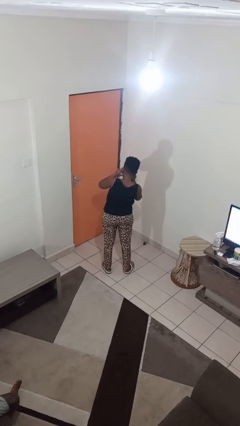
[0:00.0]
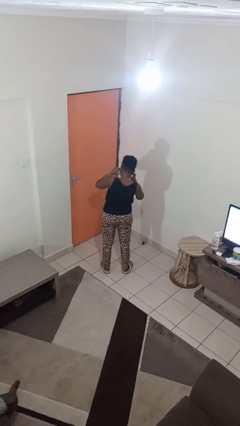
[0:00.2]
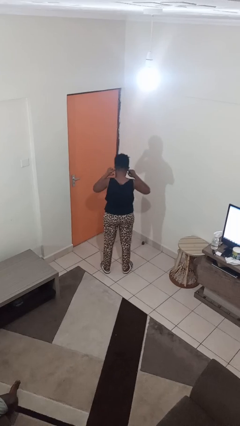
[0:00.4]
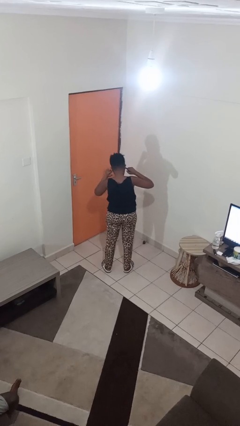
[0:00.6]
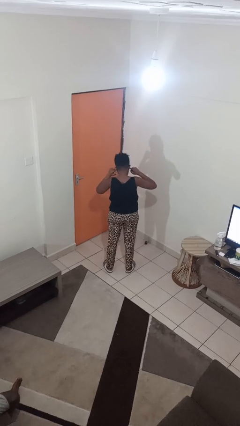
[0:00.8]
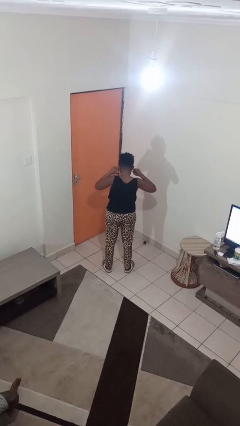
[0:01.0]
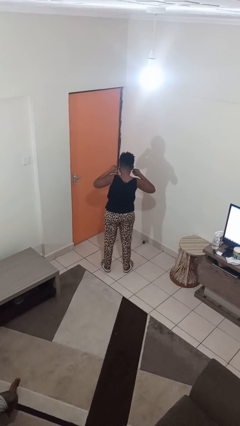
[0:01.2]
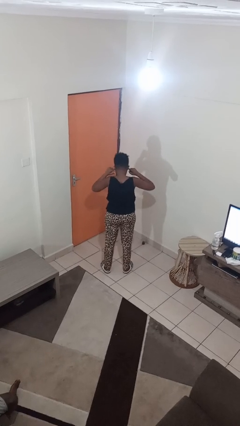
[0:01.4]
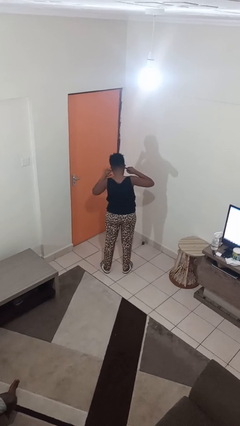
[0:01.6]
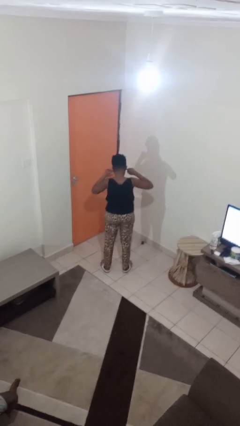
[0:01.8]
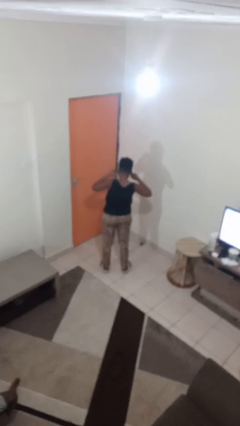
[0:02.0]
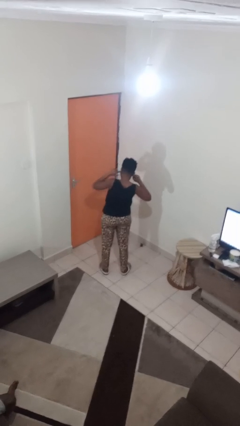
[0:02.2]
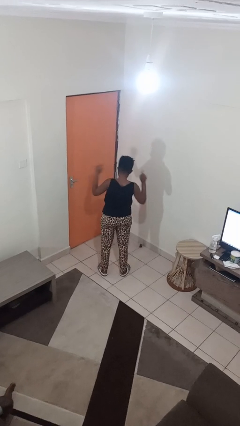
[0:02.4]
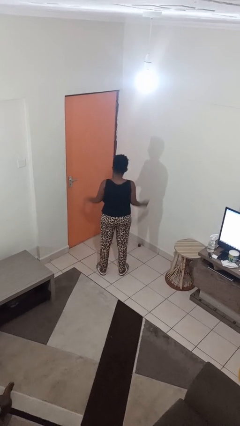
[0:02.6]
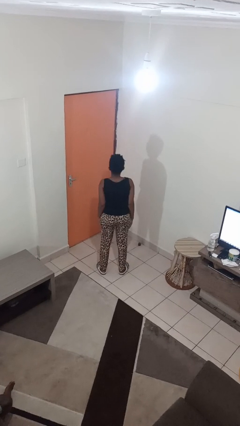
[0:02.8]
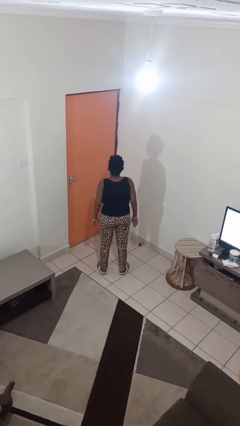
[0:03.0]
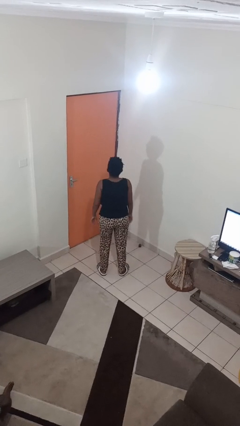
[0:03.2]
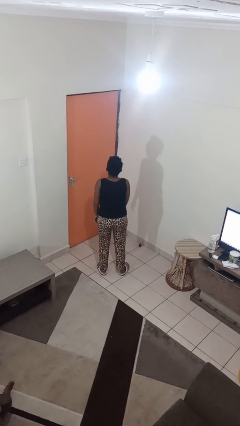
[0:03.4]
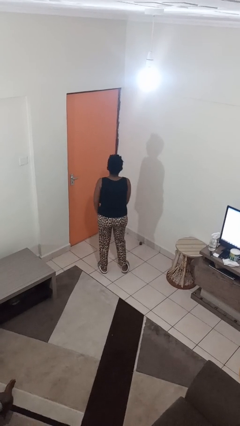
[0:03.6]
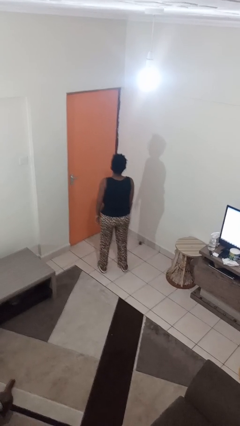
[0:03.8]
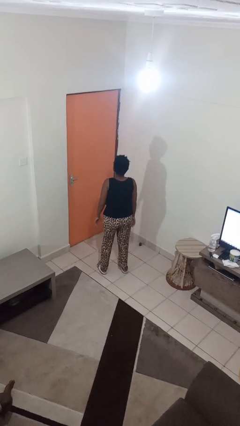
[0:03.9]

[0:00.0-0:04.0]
person puts fingers in ear

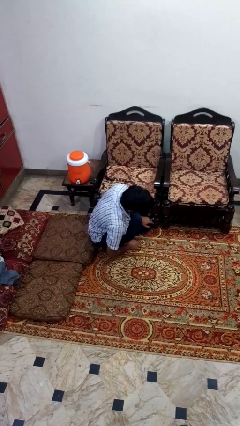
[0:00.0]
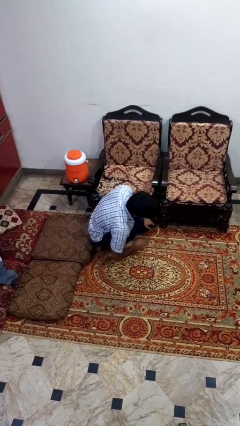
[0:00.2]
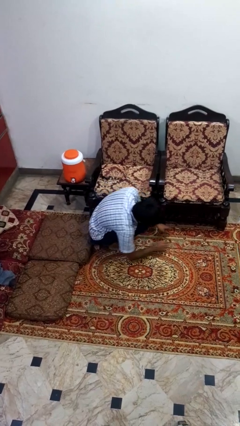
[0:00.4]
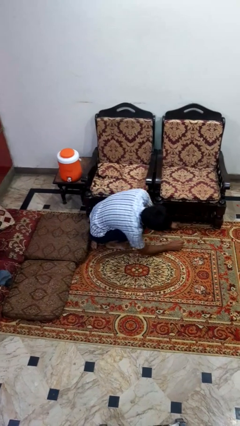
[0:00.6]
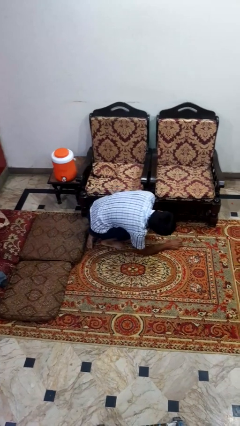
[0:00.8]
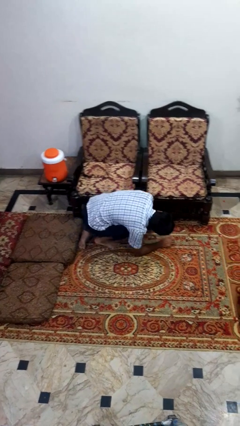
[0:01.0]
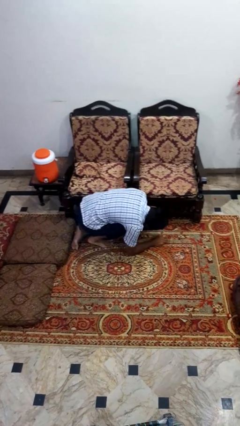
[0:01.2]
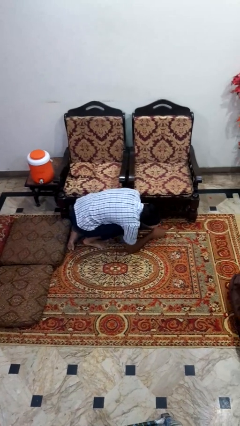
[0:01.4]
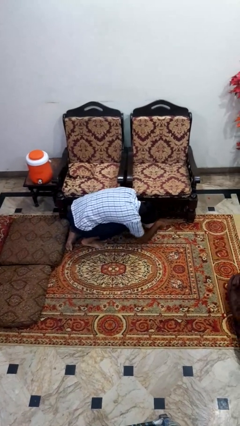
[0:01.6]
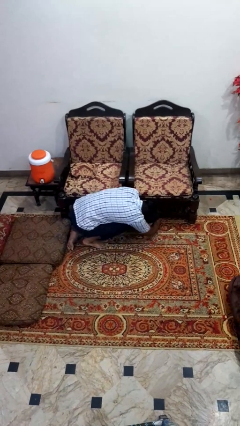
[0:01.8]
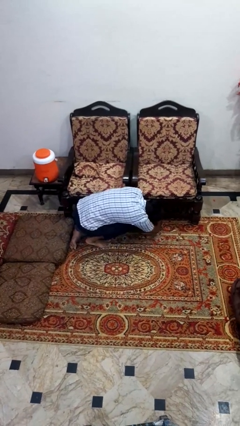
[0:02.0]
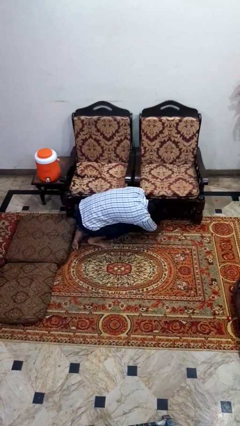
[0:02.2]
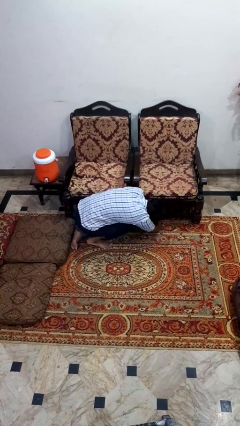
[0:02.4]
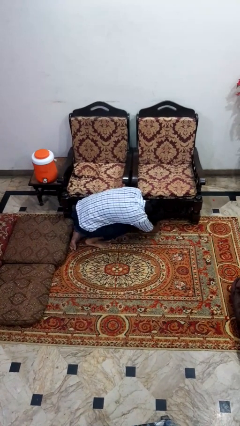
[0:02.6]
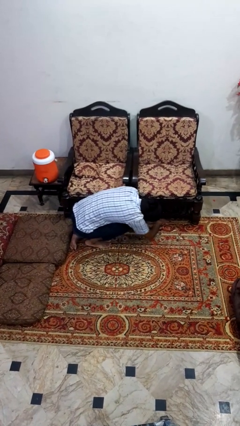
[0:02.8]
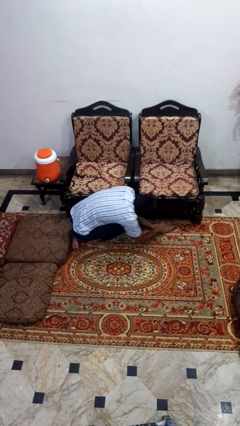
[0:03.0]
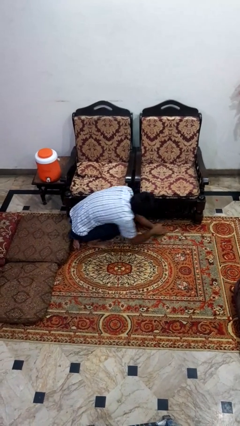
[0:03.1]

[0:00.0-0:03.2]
person searches under couch

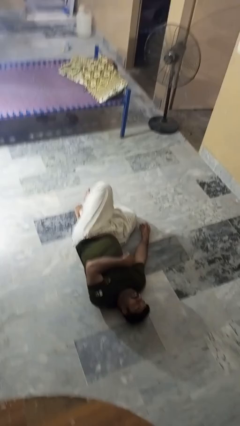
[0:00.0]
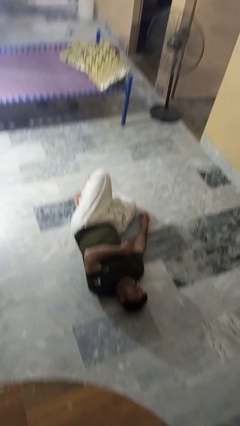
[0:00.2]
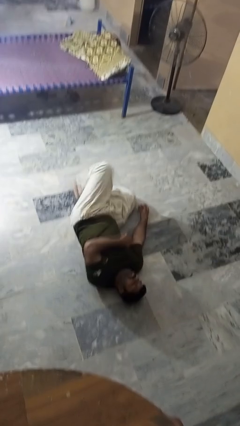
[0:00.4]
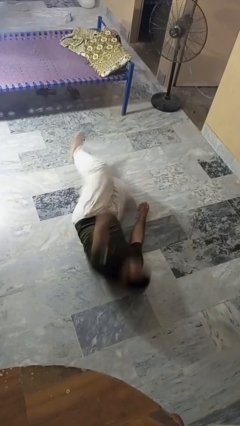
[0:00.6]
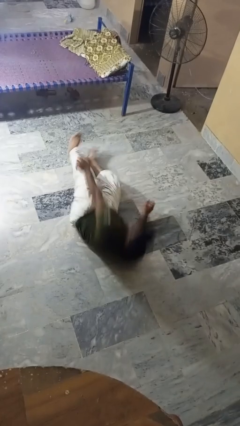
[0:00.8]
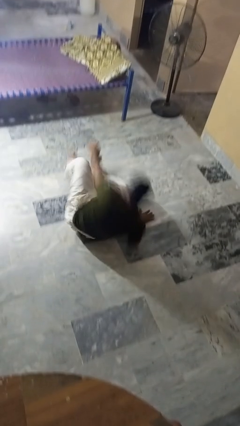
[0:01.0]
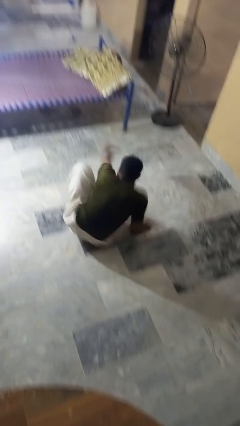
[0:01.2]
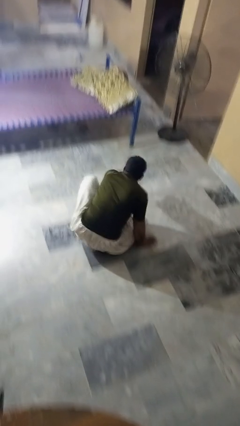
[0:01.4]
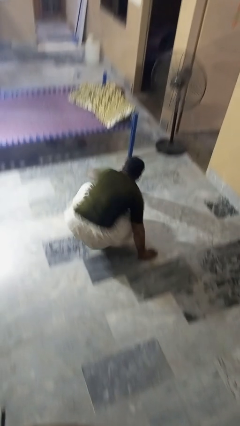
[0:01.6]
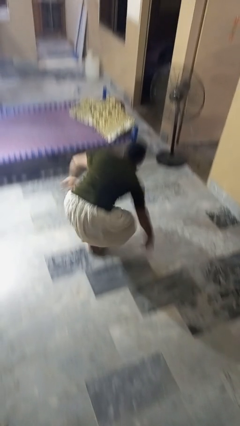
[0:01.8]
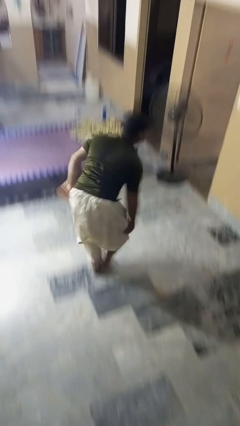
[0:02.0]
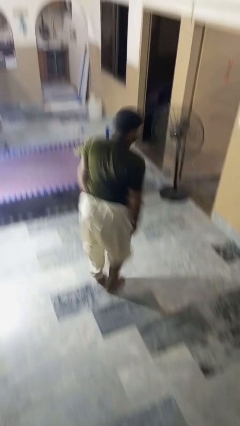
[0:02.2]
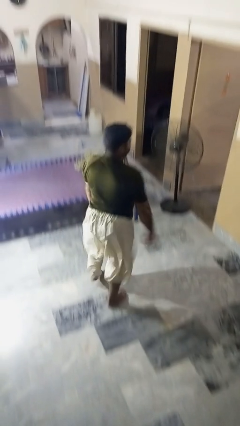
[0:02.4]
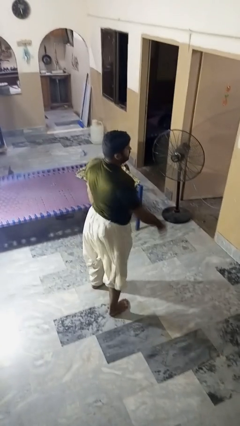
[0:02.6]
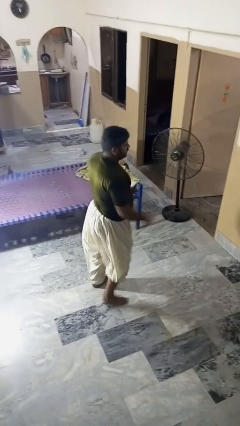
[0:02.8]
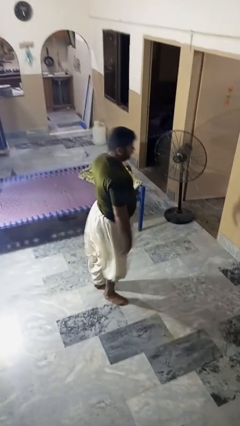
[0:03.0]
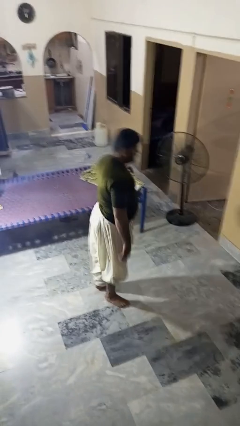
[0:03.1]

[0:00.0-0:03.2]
person stands up from floor

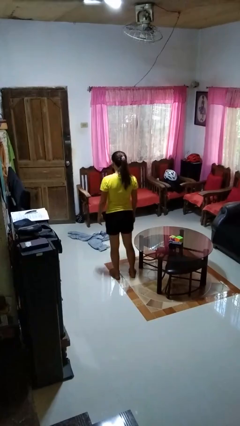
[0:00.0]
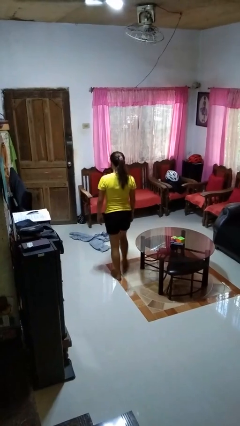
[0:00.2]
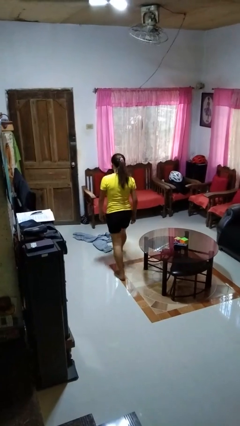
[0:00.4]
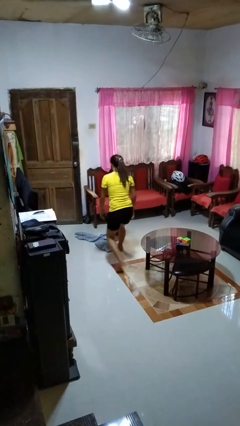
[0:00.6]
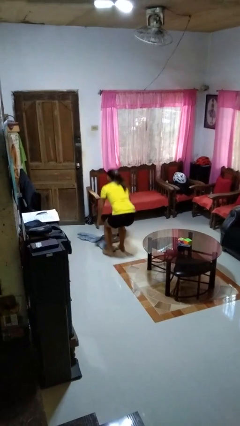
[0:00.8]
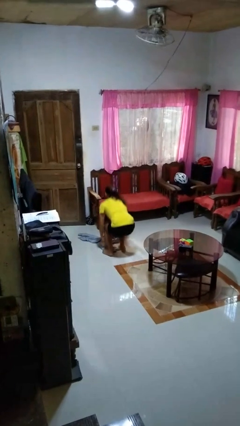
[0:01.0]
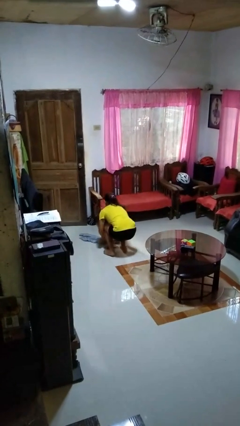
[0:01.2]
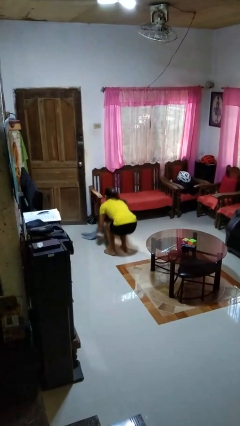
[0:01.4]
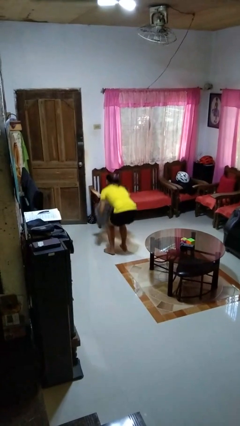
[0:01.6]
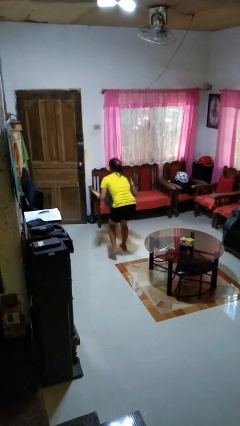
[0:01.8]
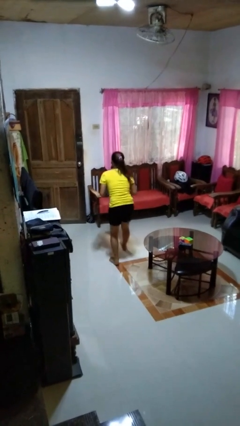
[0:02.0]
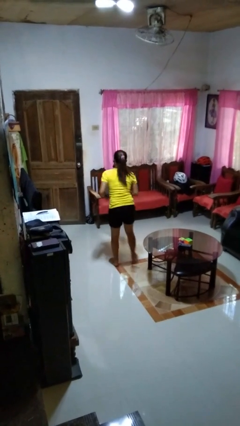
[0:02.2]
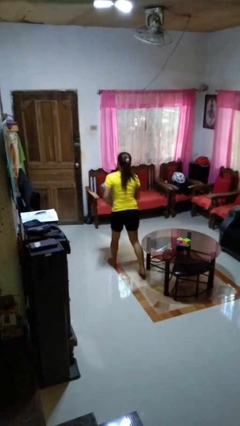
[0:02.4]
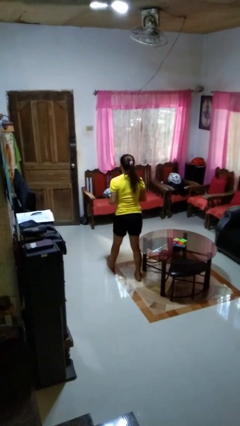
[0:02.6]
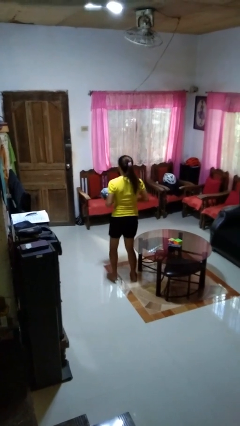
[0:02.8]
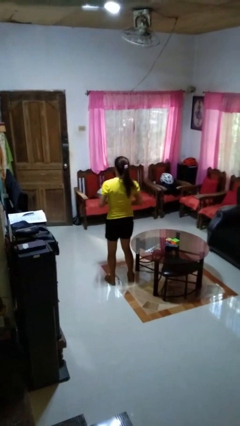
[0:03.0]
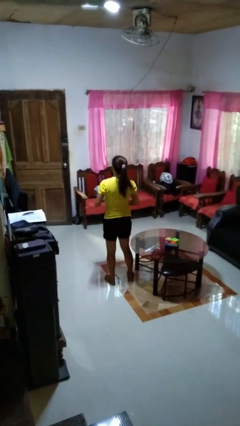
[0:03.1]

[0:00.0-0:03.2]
person picks up object from floor

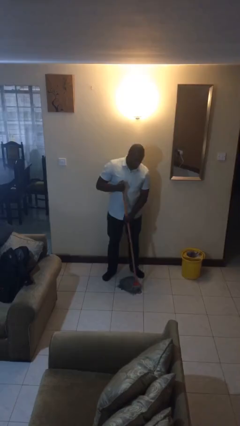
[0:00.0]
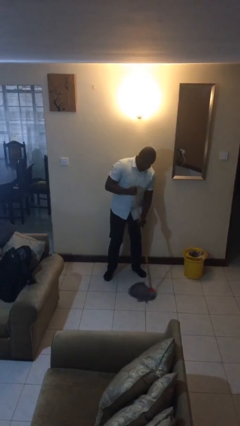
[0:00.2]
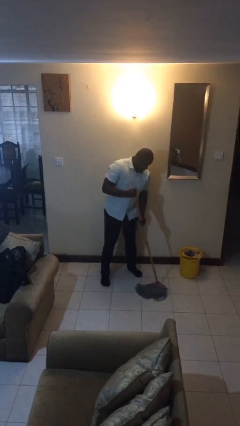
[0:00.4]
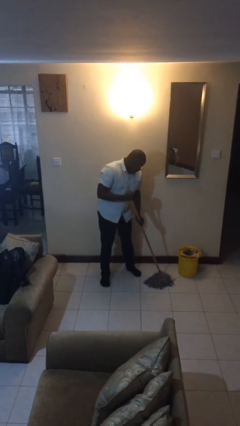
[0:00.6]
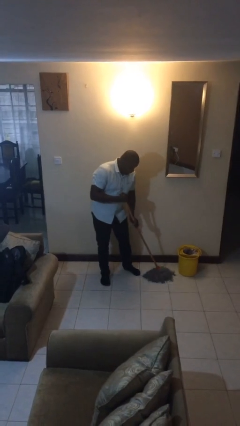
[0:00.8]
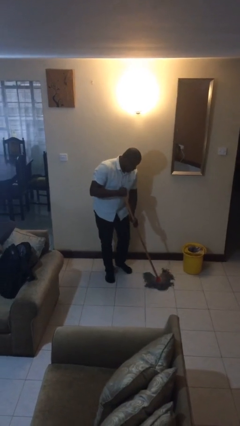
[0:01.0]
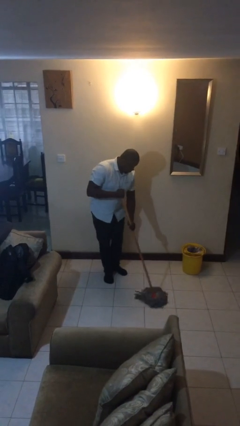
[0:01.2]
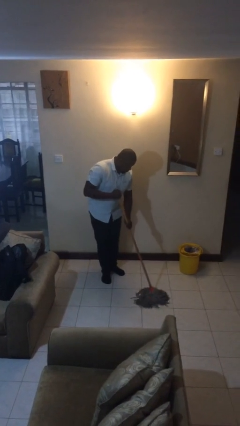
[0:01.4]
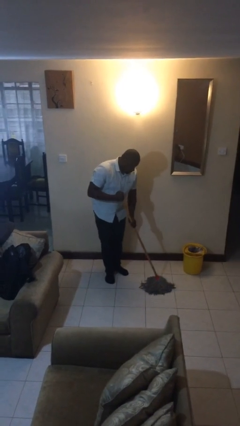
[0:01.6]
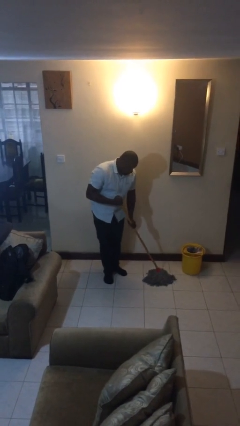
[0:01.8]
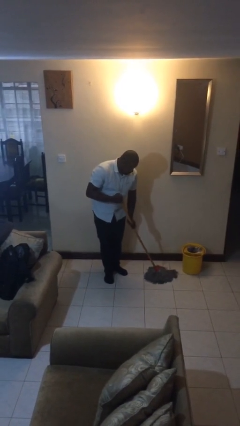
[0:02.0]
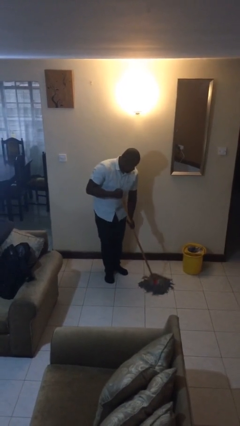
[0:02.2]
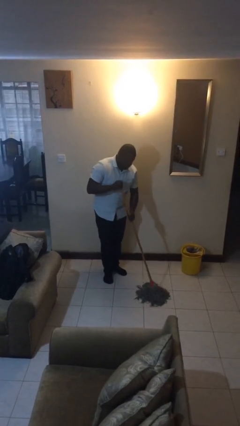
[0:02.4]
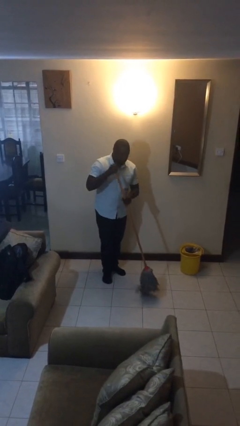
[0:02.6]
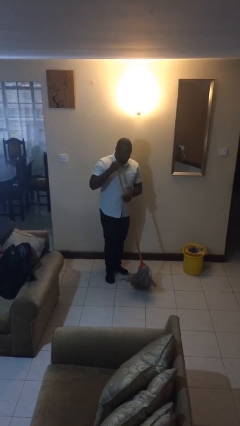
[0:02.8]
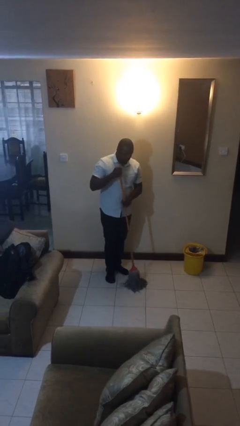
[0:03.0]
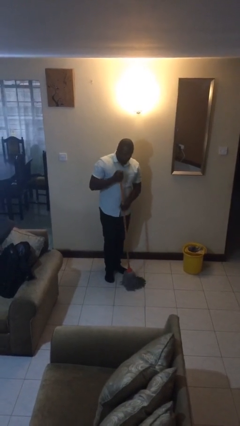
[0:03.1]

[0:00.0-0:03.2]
person mops

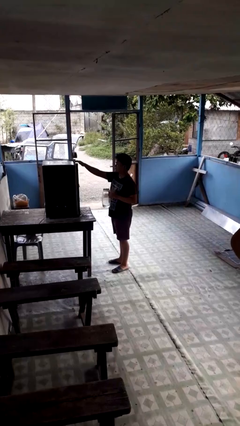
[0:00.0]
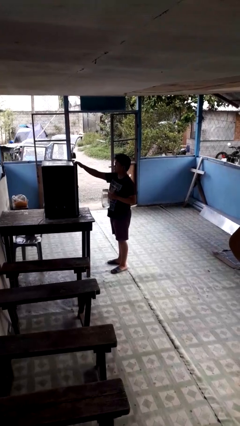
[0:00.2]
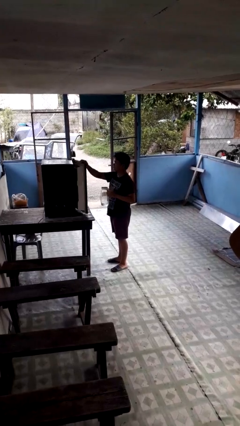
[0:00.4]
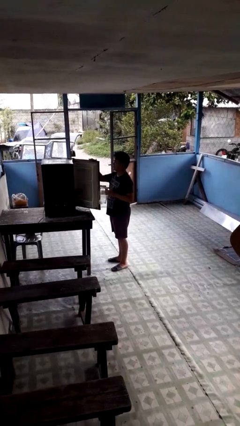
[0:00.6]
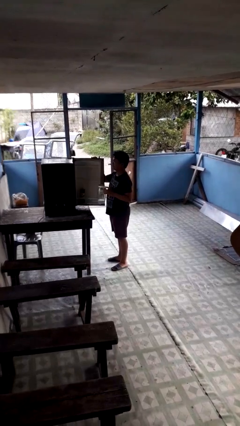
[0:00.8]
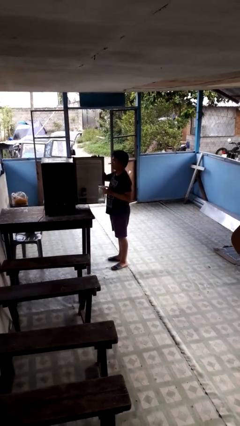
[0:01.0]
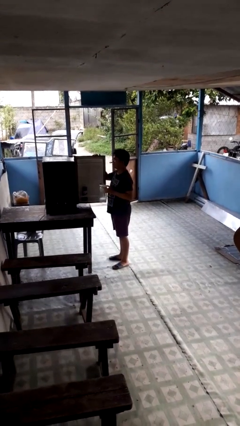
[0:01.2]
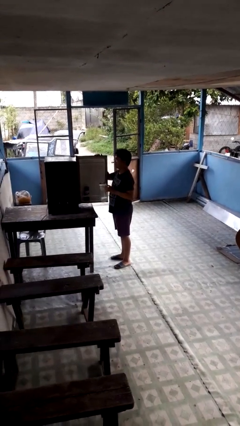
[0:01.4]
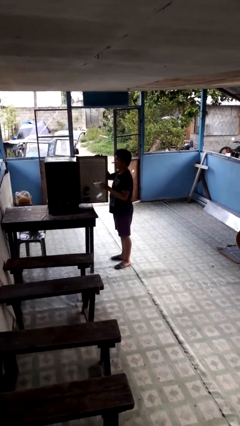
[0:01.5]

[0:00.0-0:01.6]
person opens refrigerator
